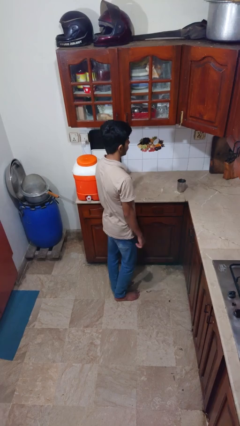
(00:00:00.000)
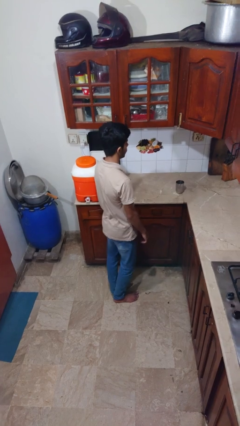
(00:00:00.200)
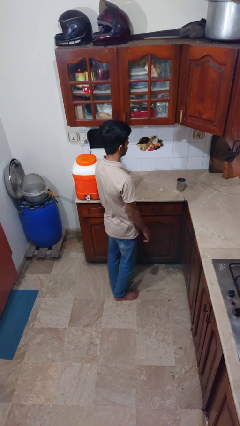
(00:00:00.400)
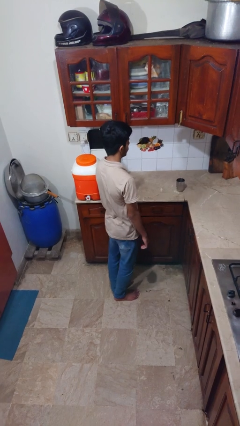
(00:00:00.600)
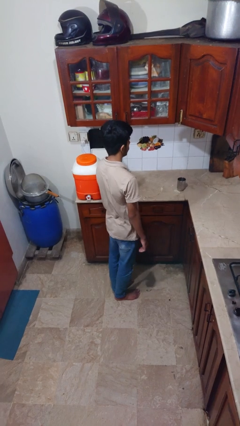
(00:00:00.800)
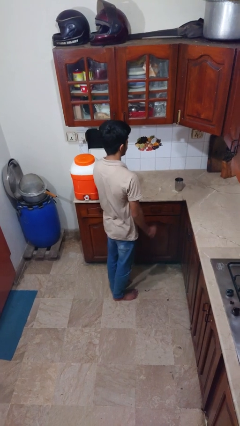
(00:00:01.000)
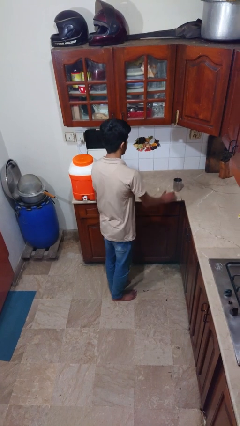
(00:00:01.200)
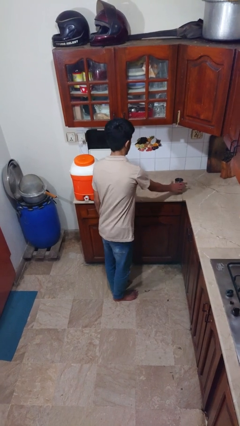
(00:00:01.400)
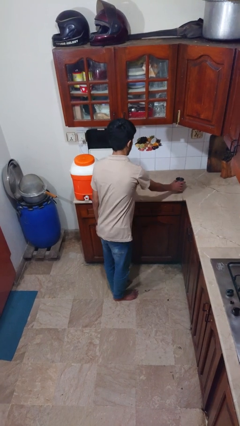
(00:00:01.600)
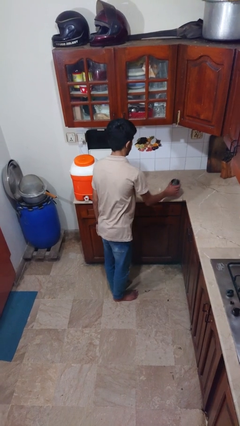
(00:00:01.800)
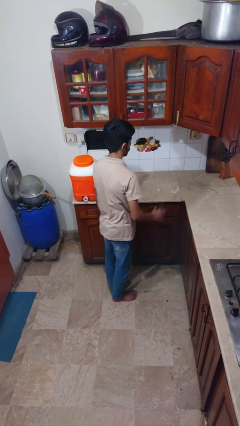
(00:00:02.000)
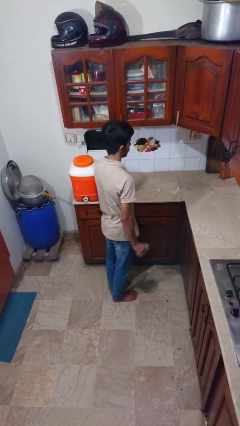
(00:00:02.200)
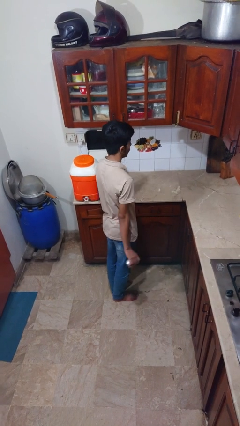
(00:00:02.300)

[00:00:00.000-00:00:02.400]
person picks up object from countertop

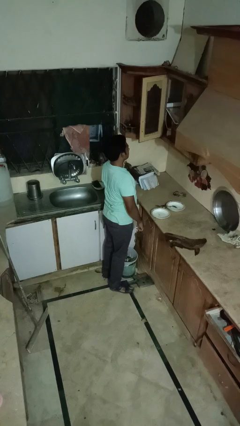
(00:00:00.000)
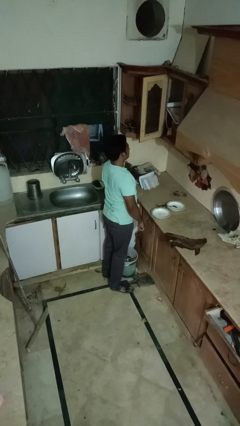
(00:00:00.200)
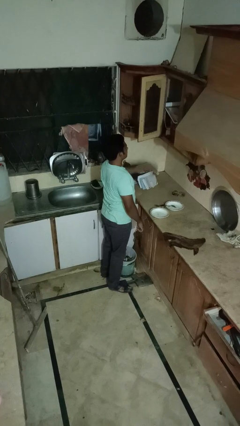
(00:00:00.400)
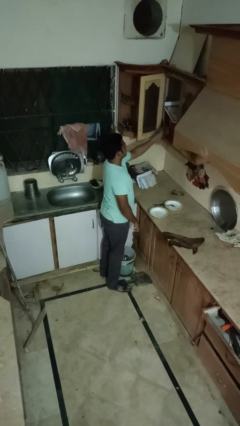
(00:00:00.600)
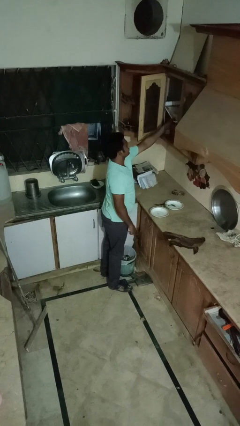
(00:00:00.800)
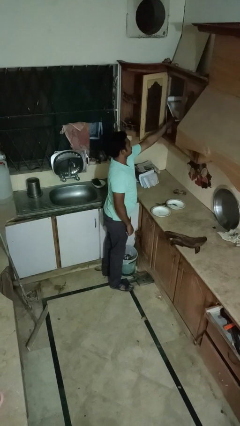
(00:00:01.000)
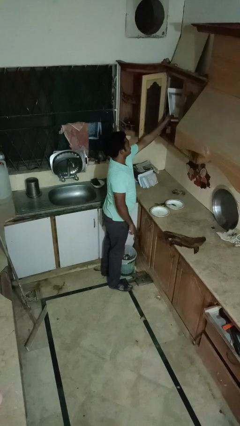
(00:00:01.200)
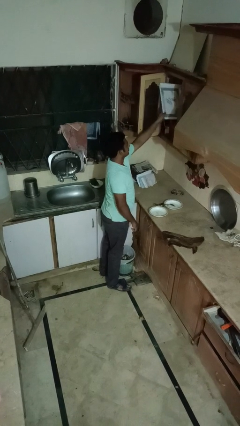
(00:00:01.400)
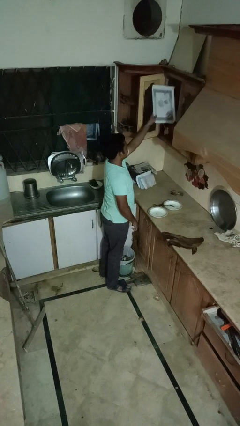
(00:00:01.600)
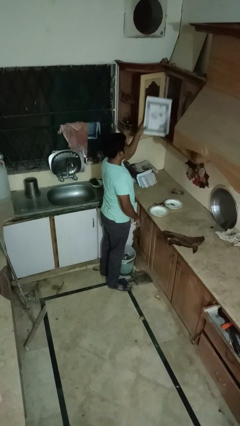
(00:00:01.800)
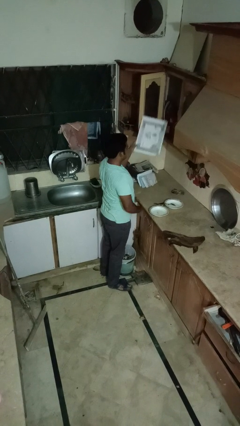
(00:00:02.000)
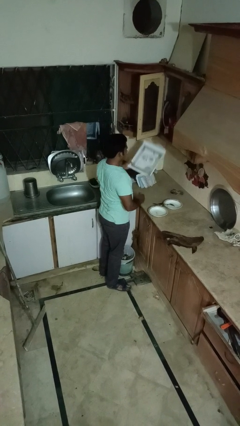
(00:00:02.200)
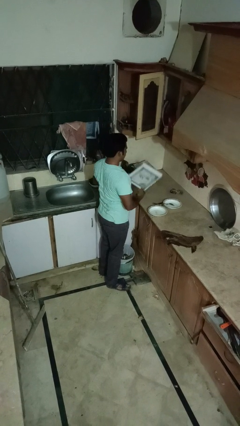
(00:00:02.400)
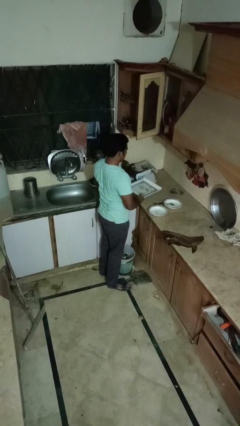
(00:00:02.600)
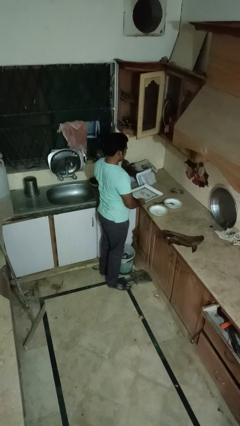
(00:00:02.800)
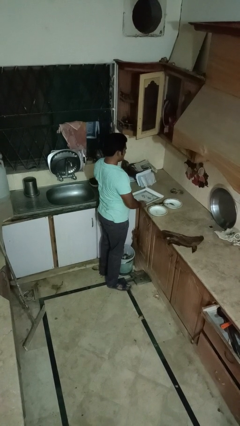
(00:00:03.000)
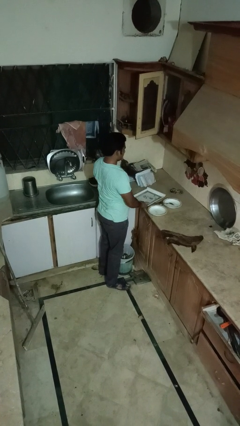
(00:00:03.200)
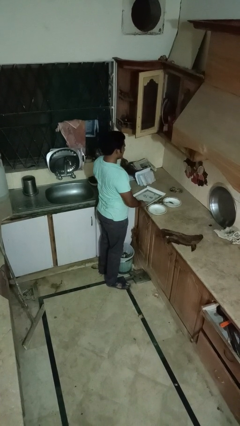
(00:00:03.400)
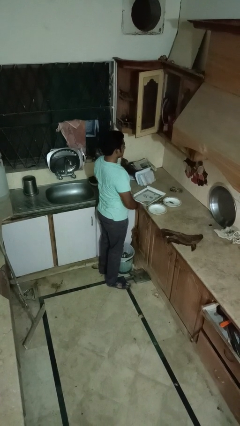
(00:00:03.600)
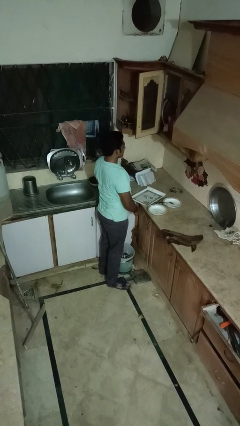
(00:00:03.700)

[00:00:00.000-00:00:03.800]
person takes object from cabinet

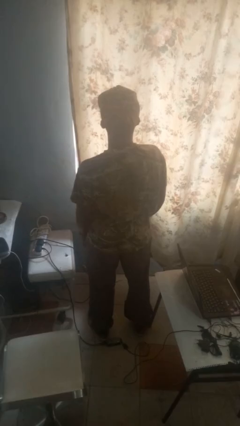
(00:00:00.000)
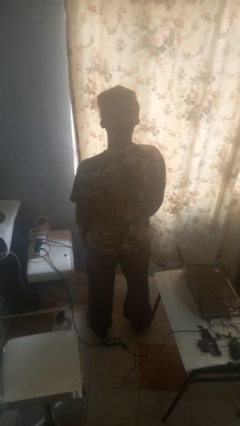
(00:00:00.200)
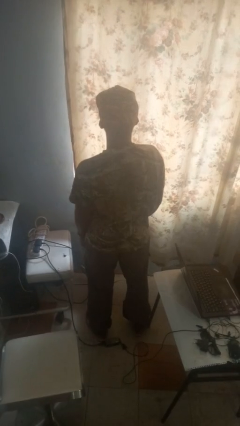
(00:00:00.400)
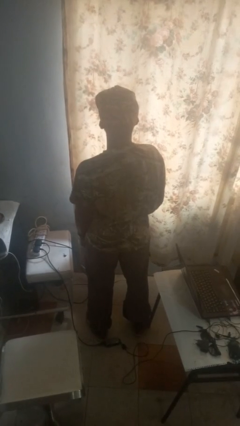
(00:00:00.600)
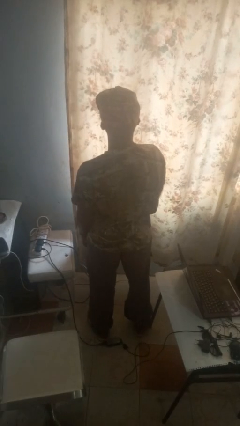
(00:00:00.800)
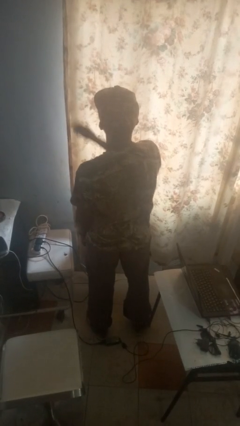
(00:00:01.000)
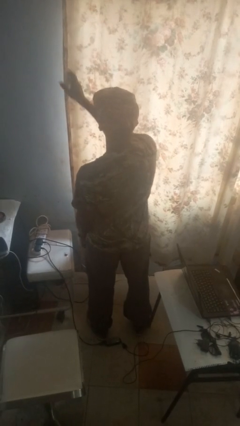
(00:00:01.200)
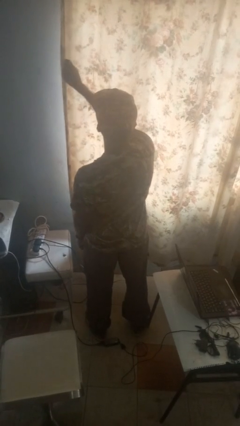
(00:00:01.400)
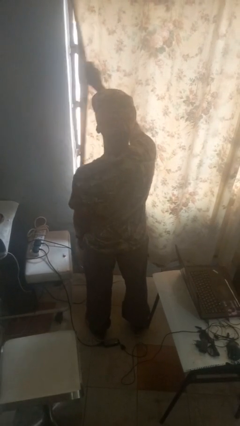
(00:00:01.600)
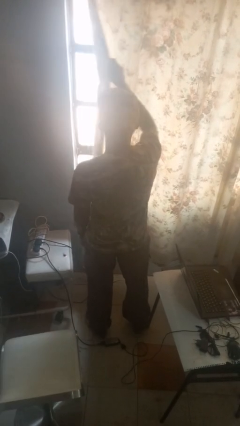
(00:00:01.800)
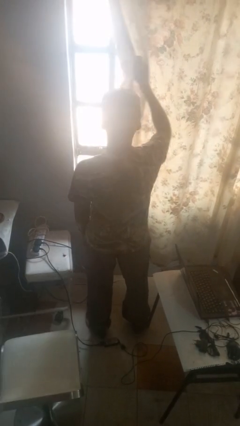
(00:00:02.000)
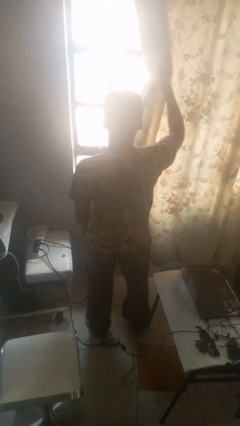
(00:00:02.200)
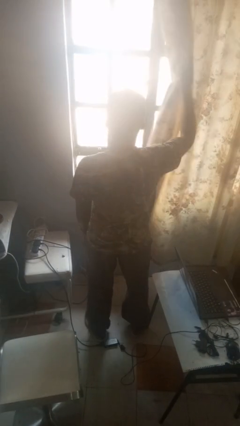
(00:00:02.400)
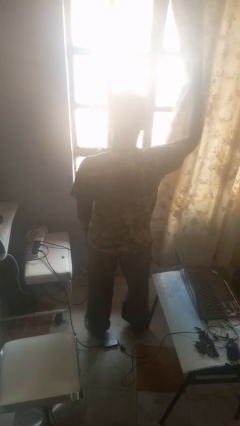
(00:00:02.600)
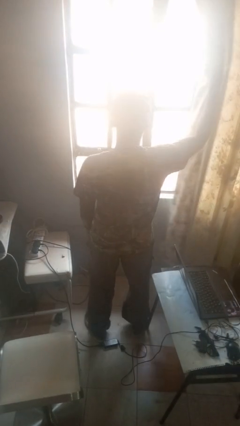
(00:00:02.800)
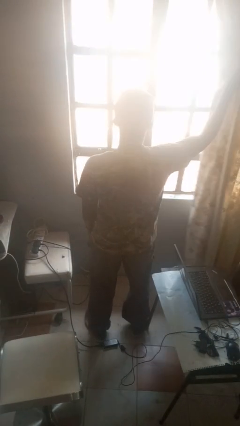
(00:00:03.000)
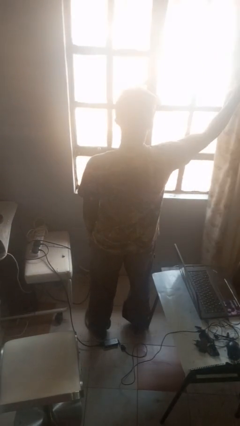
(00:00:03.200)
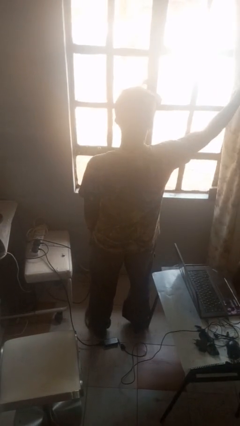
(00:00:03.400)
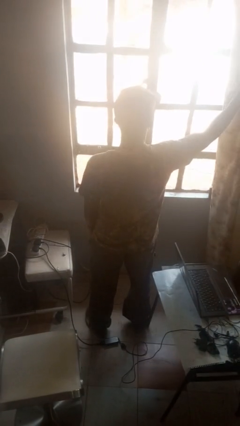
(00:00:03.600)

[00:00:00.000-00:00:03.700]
person opens curtains

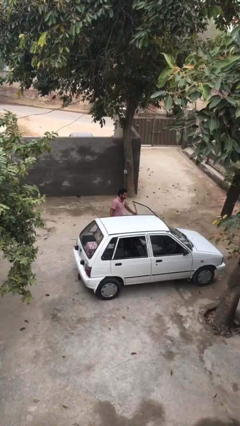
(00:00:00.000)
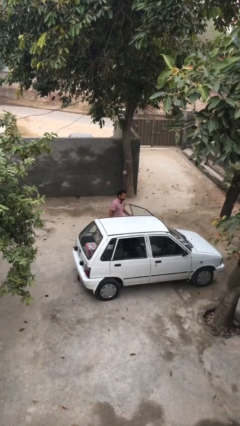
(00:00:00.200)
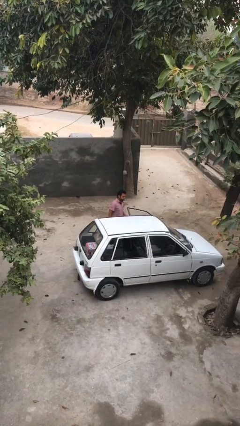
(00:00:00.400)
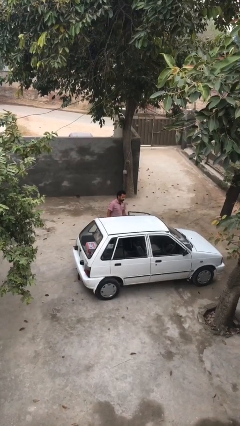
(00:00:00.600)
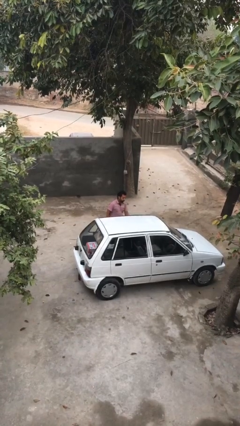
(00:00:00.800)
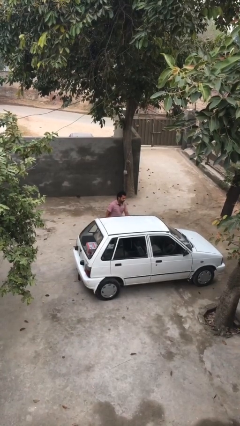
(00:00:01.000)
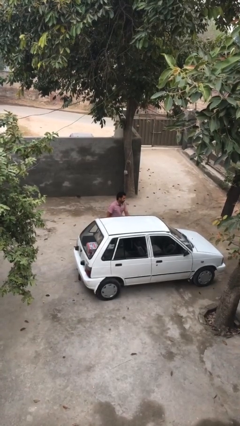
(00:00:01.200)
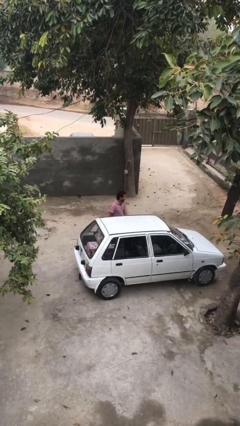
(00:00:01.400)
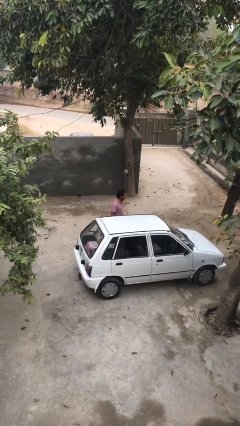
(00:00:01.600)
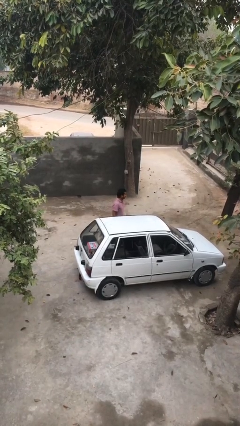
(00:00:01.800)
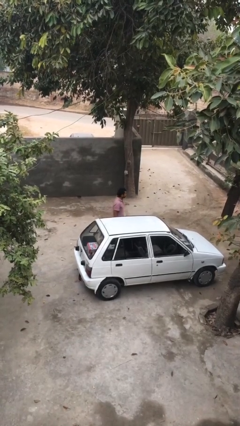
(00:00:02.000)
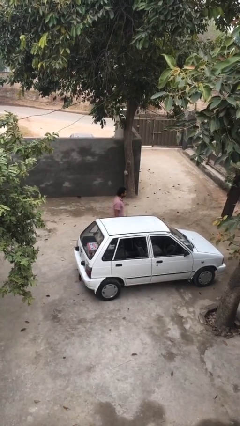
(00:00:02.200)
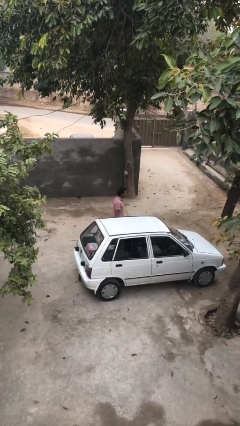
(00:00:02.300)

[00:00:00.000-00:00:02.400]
person closes car door

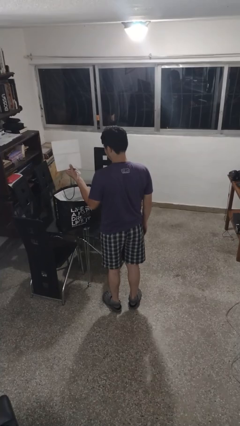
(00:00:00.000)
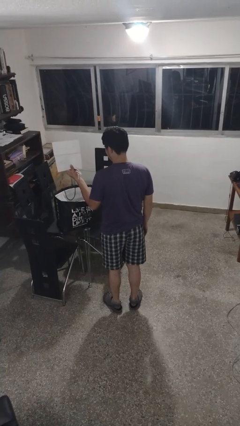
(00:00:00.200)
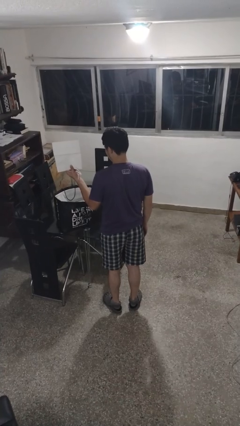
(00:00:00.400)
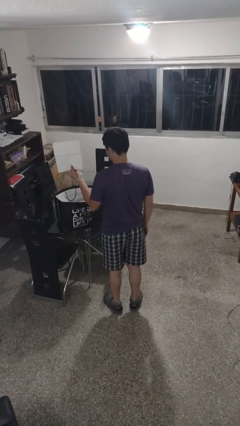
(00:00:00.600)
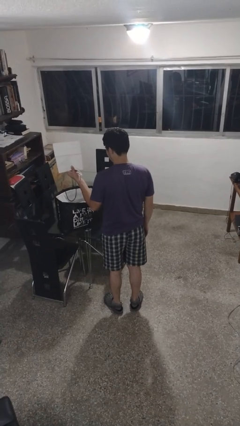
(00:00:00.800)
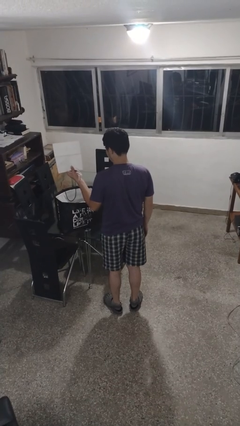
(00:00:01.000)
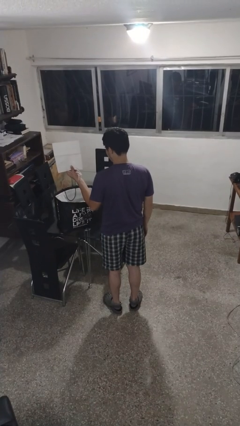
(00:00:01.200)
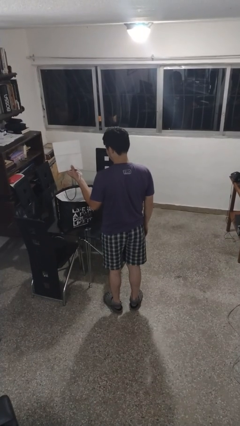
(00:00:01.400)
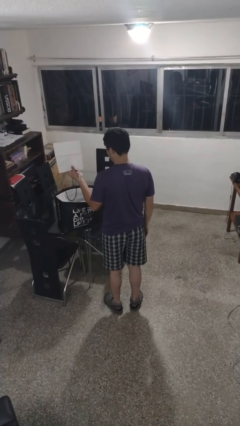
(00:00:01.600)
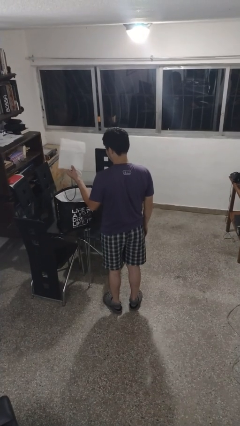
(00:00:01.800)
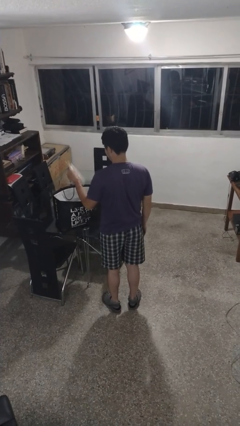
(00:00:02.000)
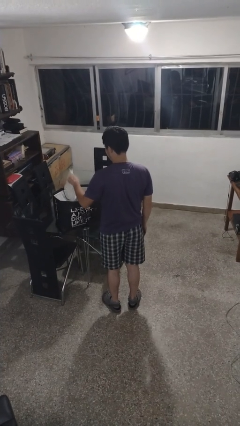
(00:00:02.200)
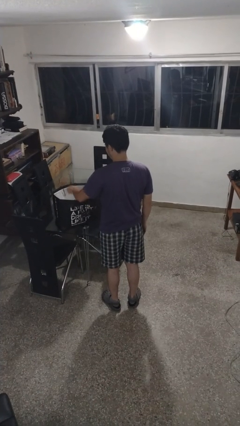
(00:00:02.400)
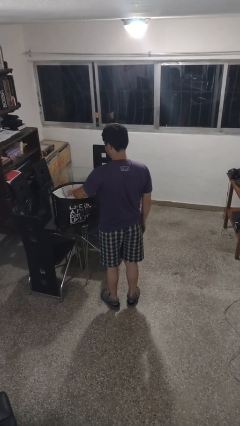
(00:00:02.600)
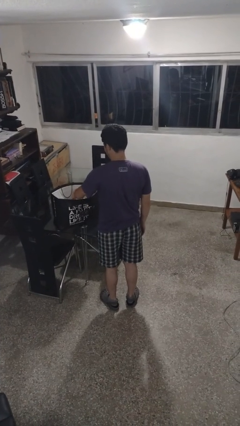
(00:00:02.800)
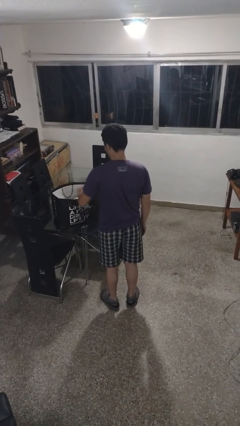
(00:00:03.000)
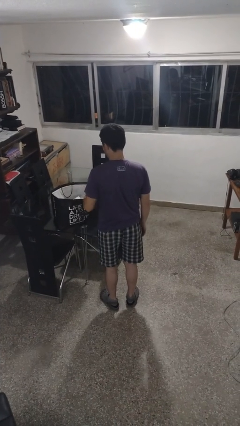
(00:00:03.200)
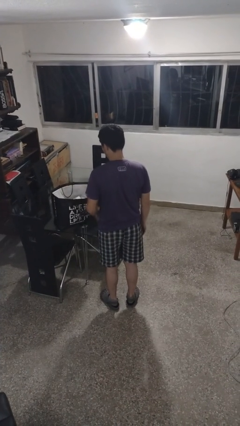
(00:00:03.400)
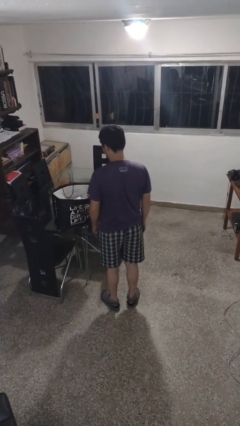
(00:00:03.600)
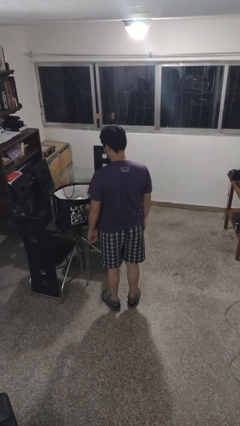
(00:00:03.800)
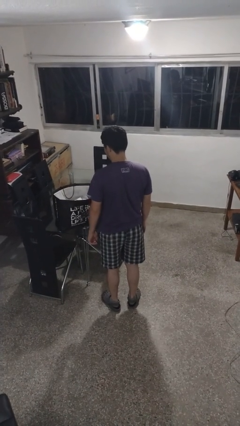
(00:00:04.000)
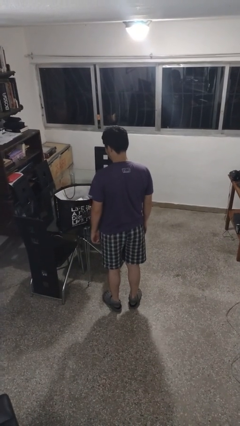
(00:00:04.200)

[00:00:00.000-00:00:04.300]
person puts object into bag

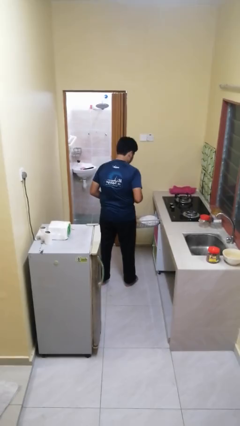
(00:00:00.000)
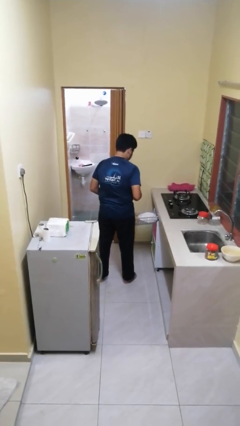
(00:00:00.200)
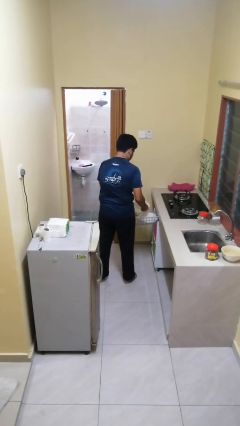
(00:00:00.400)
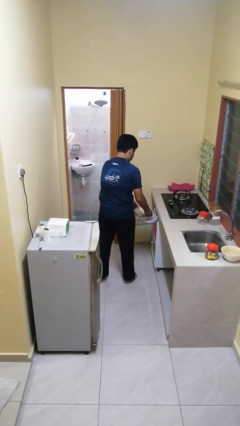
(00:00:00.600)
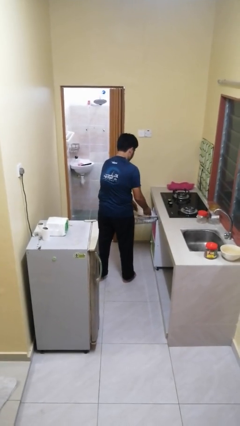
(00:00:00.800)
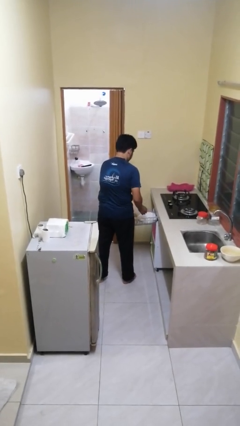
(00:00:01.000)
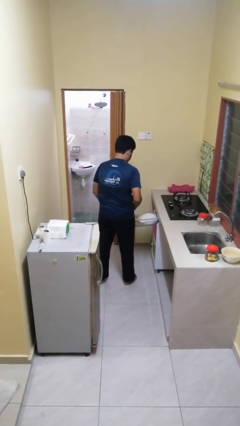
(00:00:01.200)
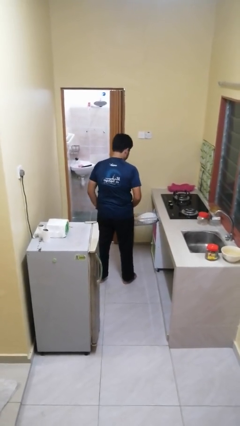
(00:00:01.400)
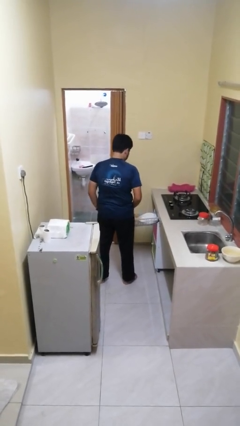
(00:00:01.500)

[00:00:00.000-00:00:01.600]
person puts object into kitchen drawer
